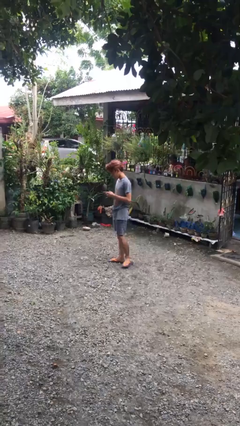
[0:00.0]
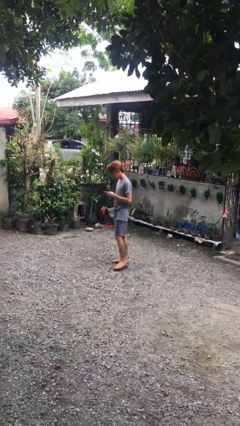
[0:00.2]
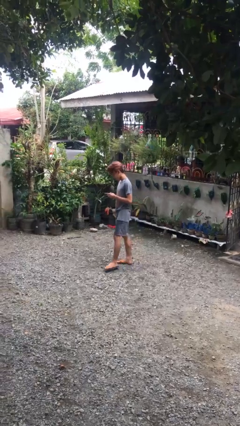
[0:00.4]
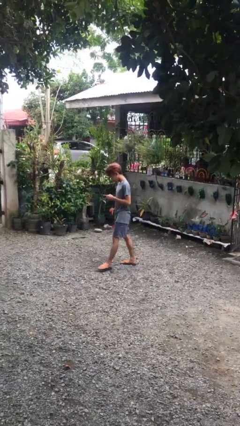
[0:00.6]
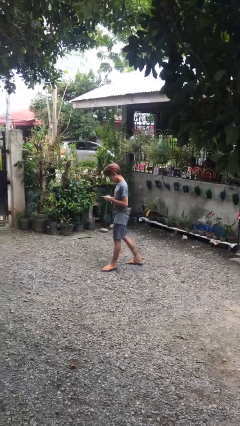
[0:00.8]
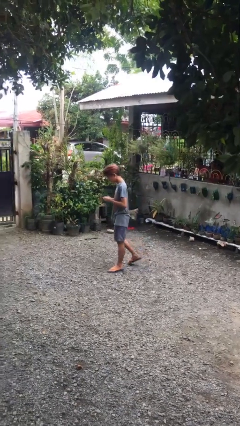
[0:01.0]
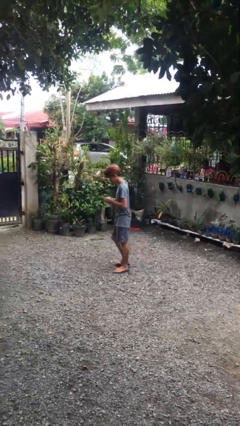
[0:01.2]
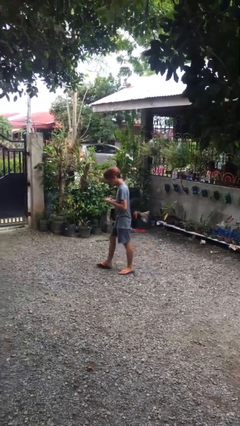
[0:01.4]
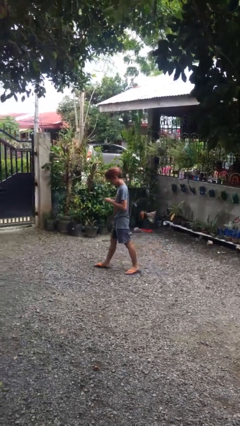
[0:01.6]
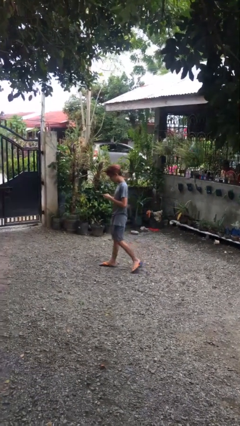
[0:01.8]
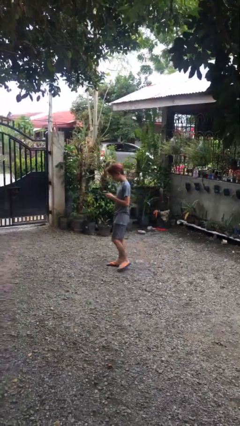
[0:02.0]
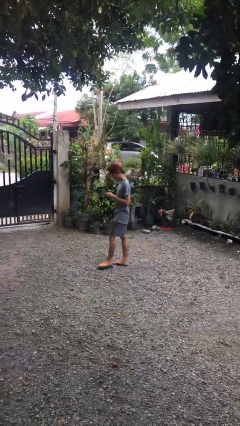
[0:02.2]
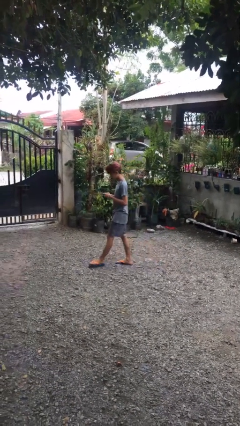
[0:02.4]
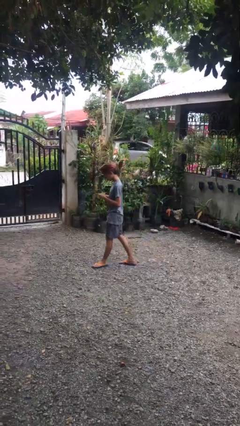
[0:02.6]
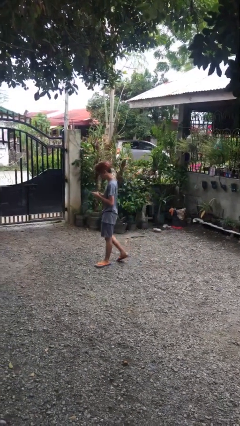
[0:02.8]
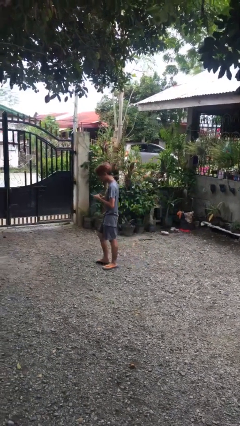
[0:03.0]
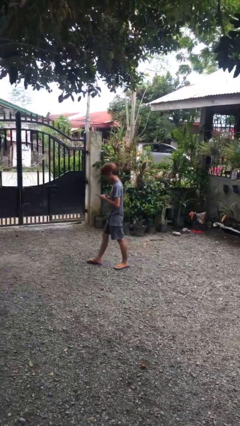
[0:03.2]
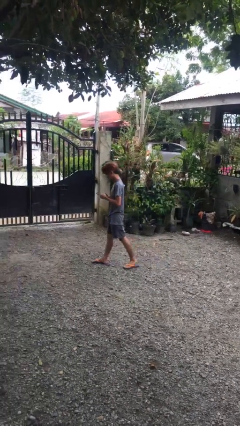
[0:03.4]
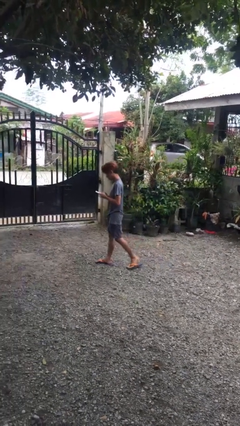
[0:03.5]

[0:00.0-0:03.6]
person texts on phone

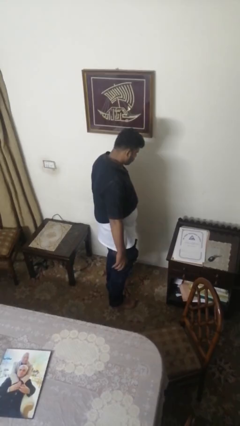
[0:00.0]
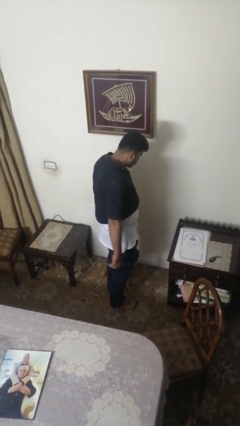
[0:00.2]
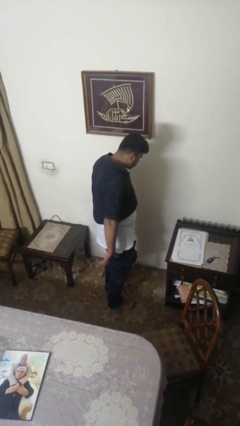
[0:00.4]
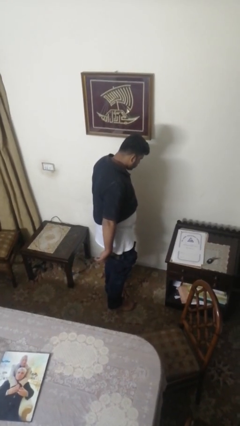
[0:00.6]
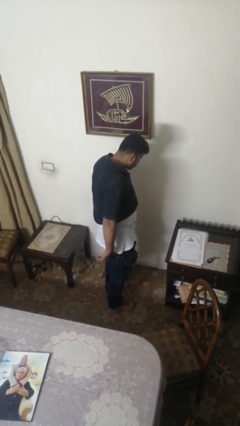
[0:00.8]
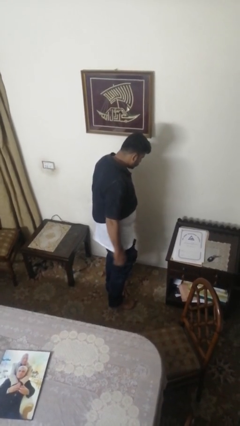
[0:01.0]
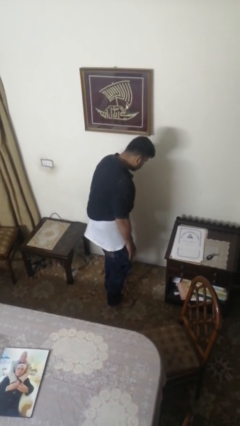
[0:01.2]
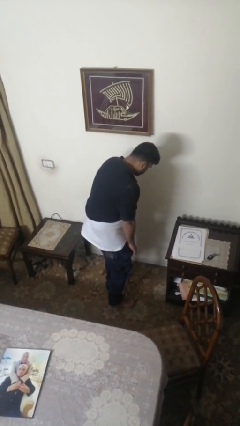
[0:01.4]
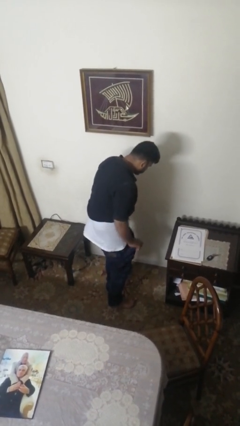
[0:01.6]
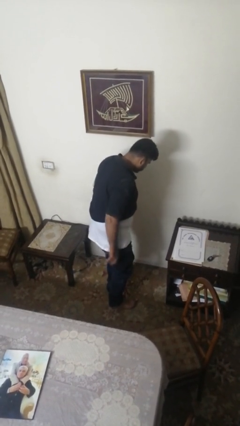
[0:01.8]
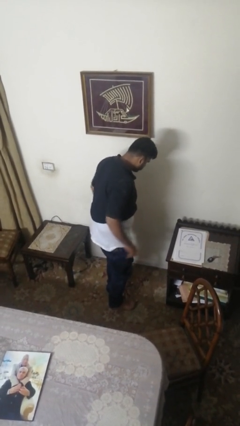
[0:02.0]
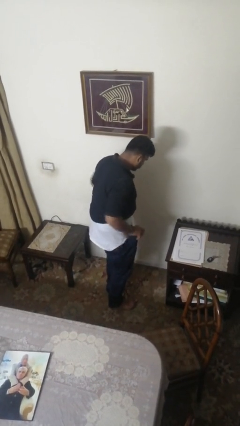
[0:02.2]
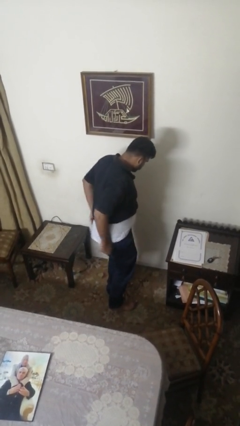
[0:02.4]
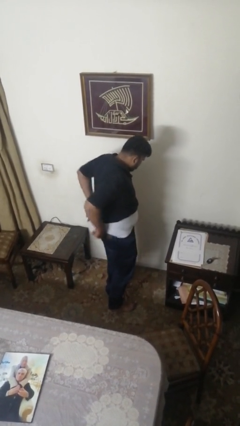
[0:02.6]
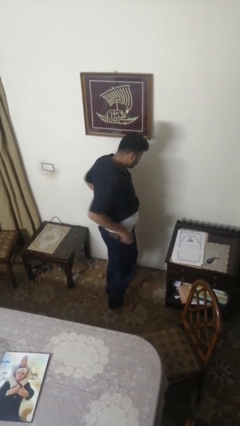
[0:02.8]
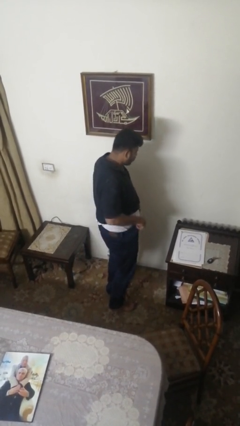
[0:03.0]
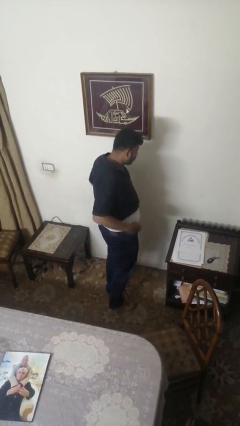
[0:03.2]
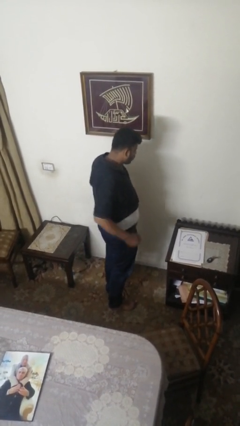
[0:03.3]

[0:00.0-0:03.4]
person puts on pants

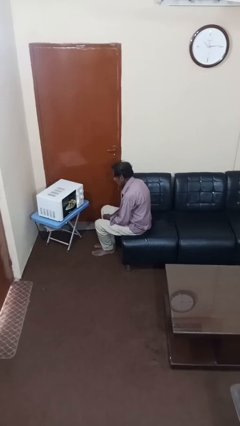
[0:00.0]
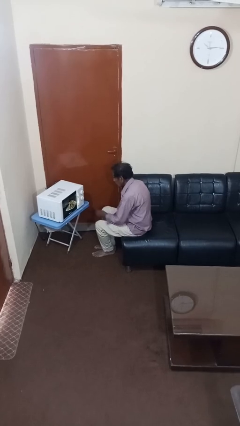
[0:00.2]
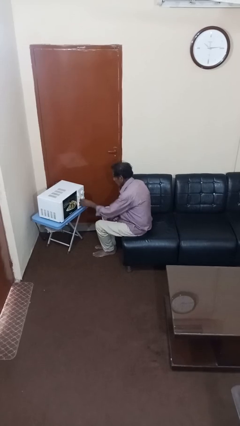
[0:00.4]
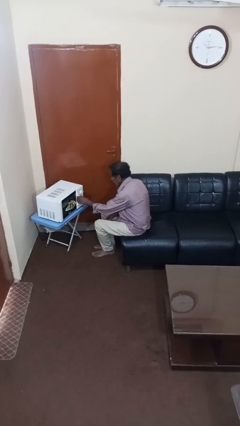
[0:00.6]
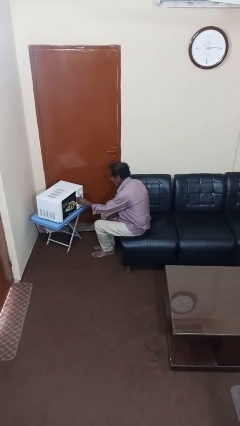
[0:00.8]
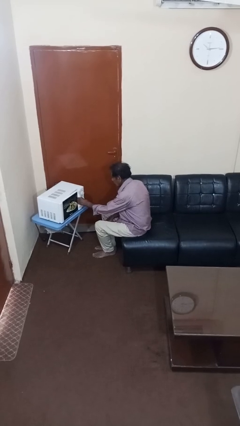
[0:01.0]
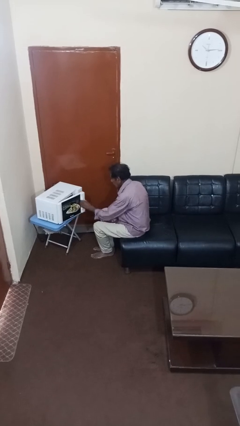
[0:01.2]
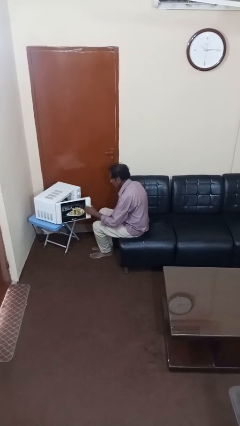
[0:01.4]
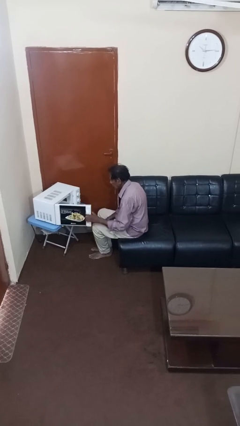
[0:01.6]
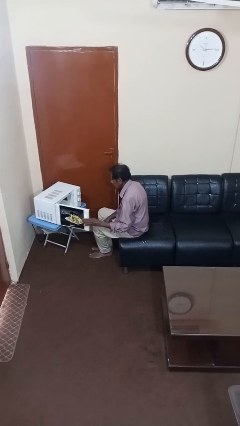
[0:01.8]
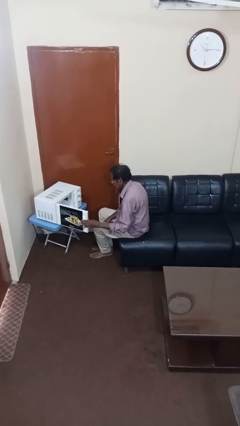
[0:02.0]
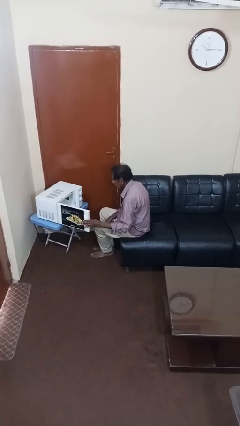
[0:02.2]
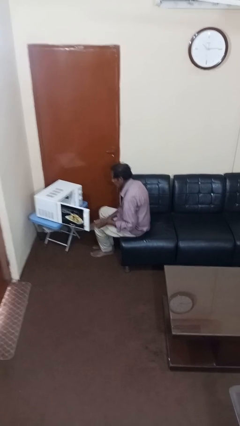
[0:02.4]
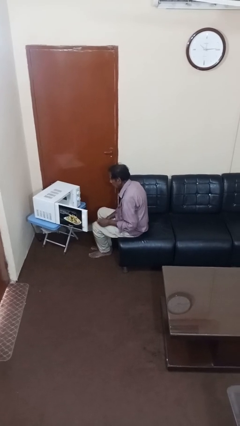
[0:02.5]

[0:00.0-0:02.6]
person opens microwave

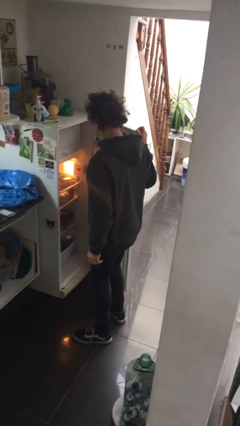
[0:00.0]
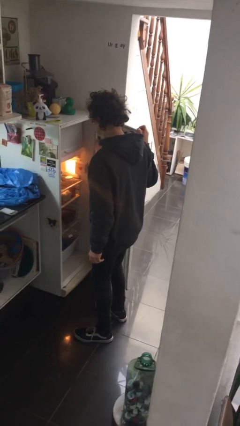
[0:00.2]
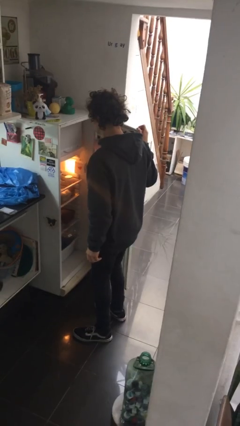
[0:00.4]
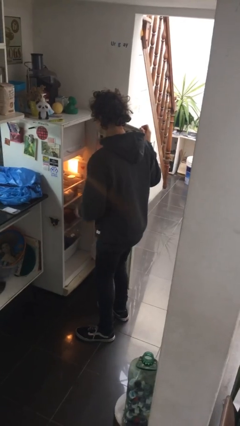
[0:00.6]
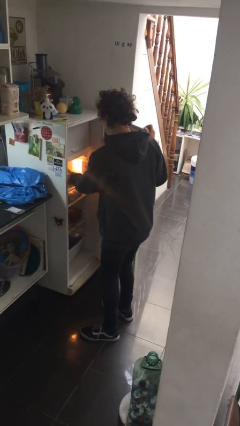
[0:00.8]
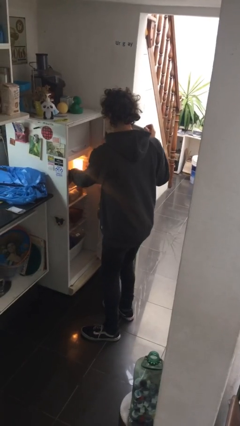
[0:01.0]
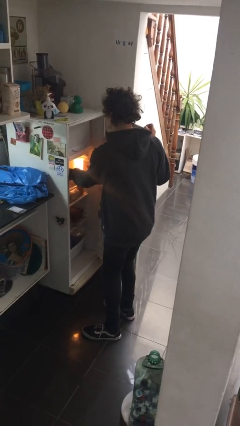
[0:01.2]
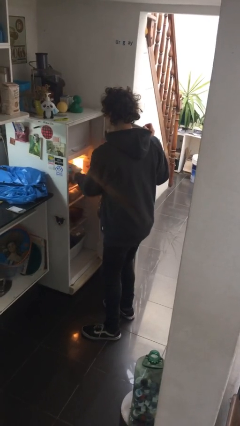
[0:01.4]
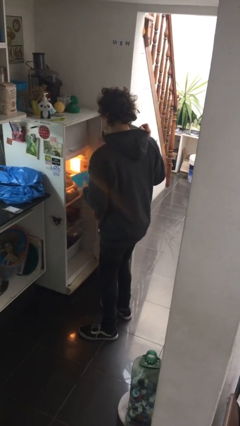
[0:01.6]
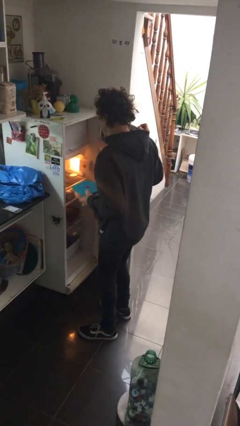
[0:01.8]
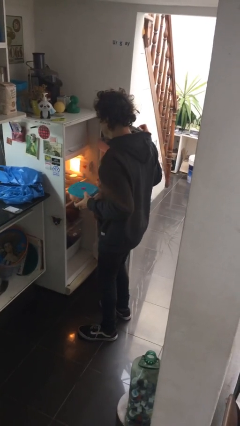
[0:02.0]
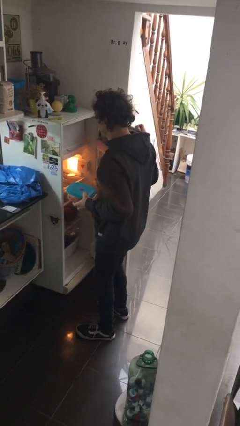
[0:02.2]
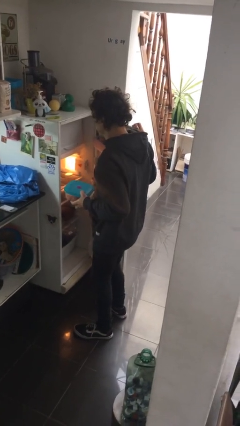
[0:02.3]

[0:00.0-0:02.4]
person takes object from refrigerator

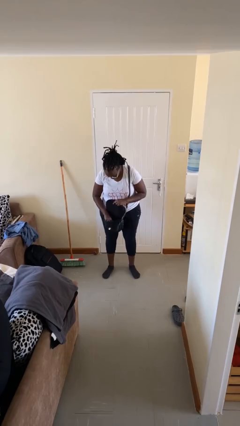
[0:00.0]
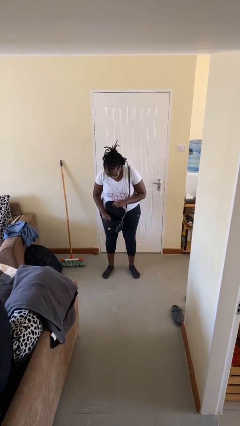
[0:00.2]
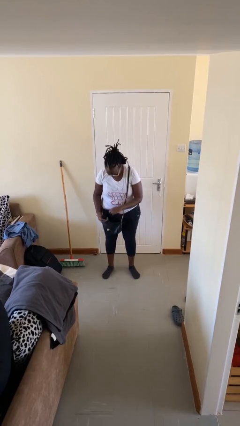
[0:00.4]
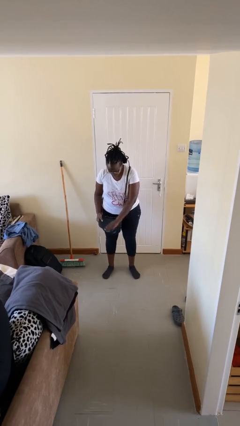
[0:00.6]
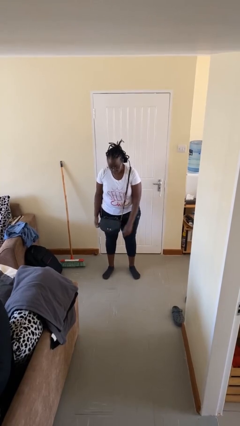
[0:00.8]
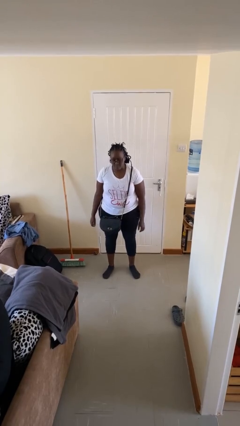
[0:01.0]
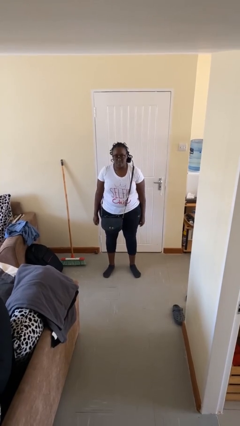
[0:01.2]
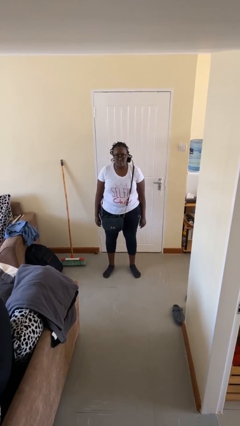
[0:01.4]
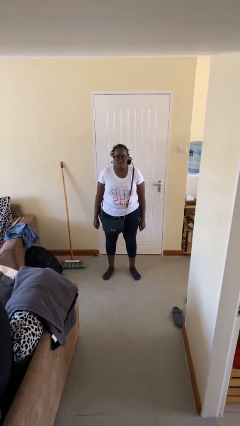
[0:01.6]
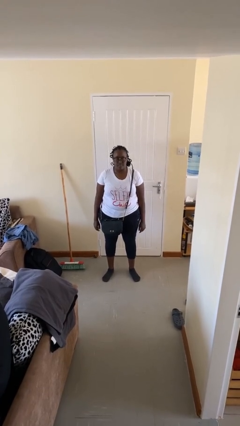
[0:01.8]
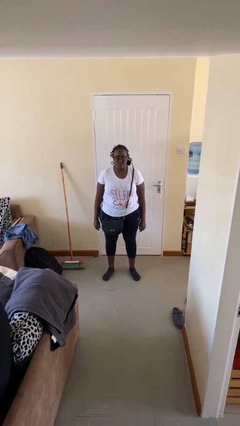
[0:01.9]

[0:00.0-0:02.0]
person puts object into purse

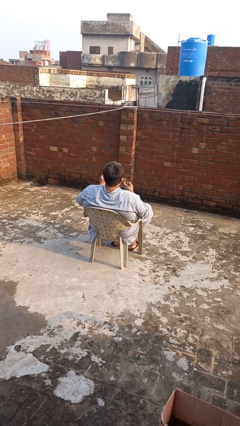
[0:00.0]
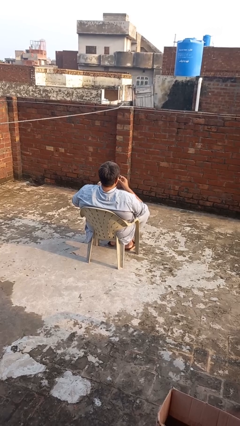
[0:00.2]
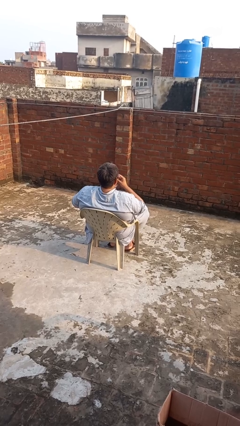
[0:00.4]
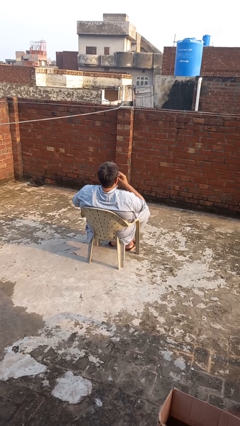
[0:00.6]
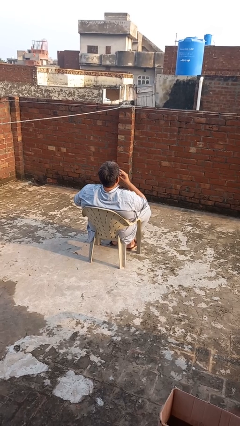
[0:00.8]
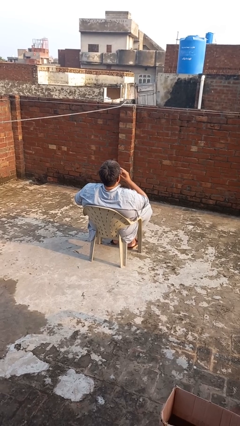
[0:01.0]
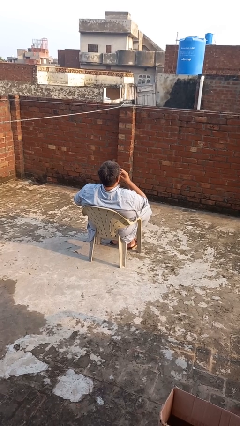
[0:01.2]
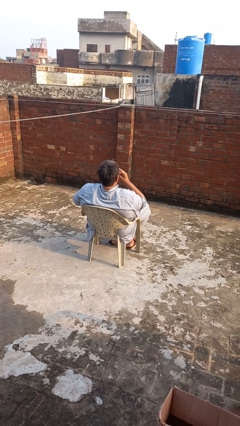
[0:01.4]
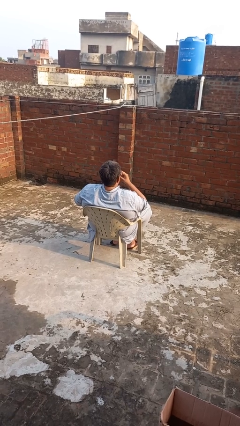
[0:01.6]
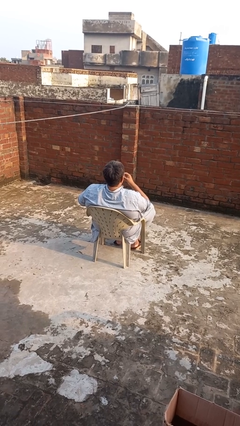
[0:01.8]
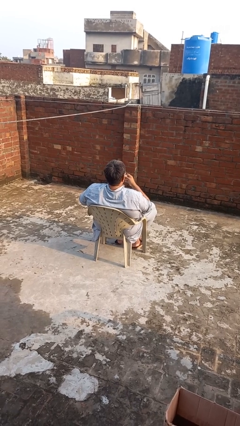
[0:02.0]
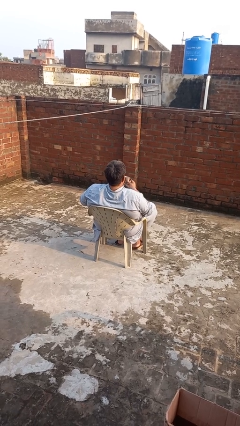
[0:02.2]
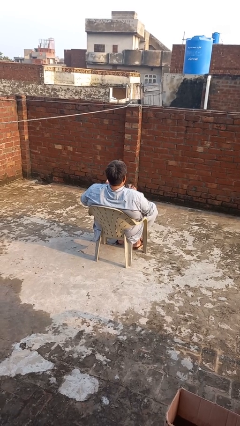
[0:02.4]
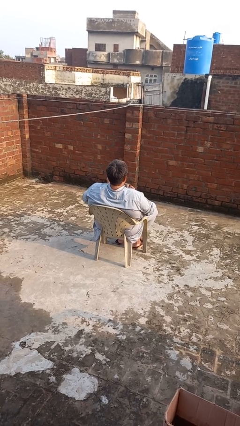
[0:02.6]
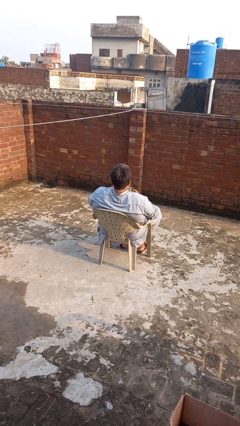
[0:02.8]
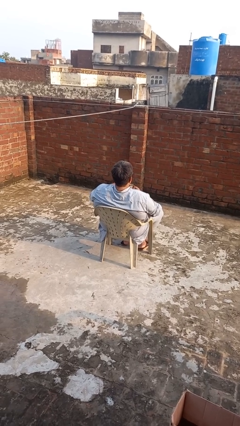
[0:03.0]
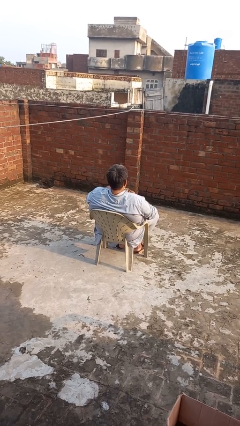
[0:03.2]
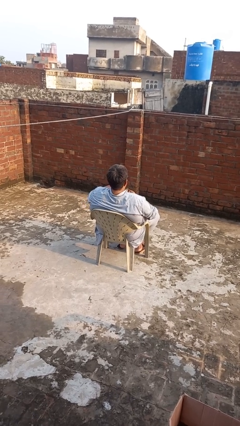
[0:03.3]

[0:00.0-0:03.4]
person drinks from mug
